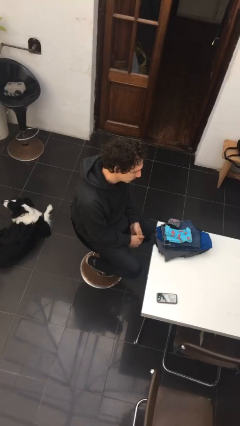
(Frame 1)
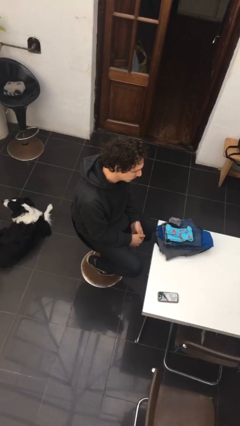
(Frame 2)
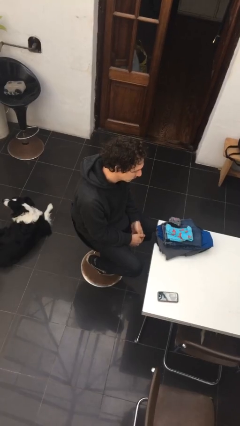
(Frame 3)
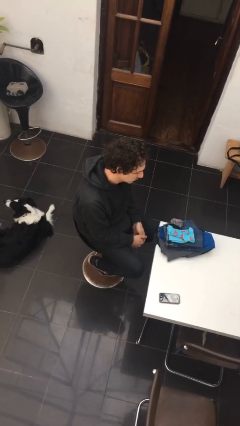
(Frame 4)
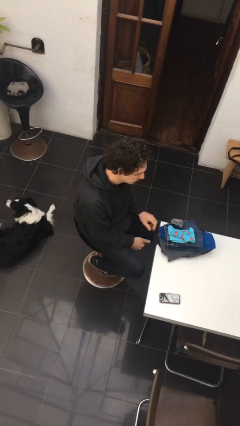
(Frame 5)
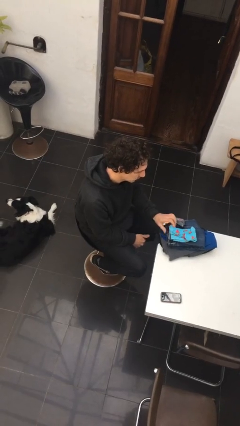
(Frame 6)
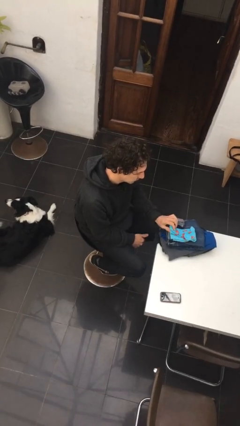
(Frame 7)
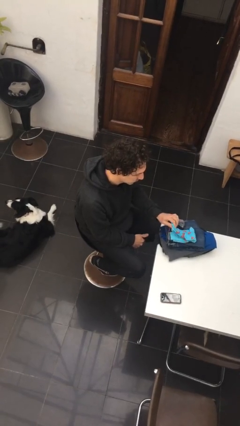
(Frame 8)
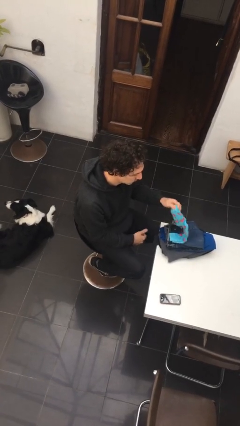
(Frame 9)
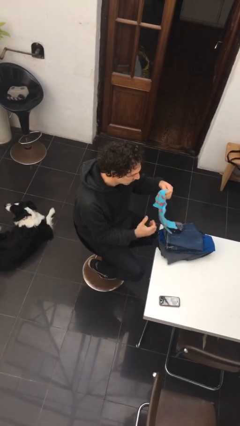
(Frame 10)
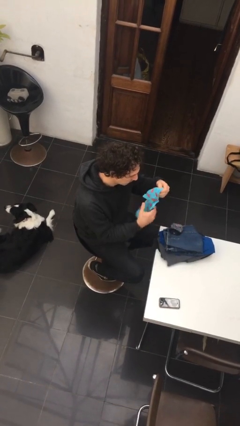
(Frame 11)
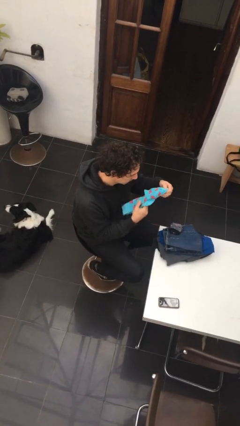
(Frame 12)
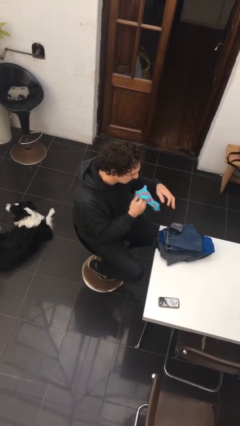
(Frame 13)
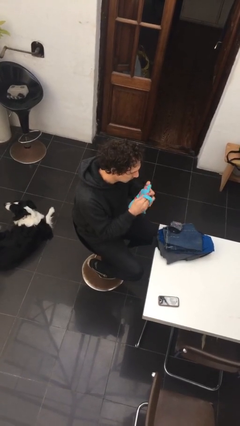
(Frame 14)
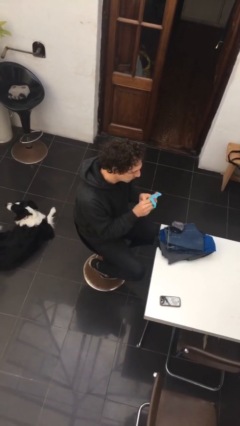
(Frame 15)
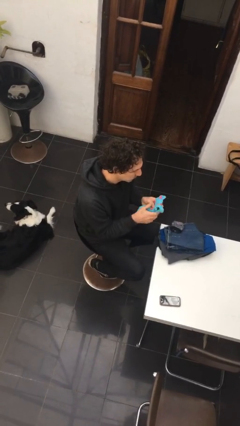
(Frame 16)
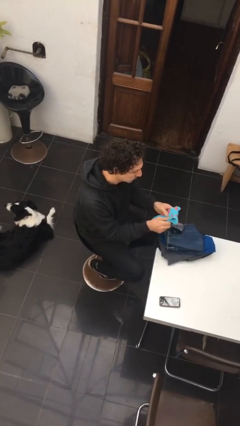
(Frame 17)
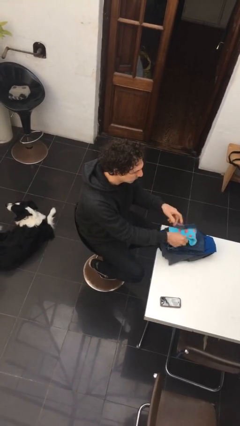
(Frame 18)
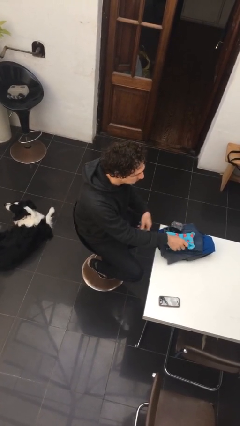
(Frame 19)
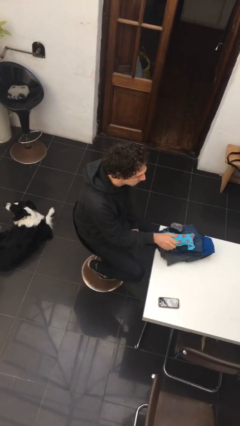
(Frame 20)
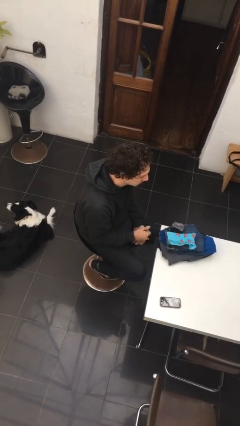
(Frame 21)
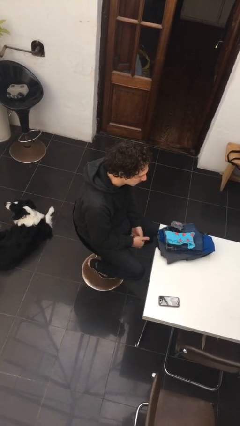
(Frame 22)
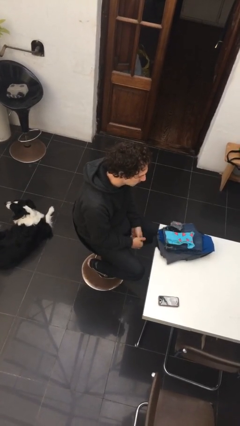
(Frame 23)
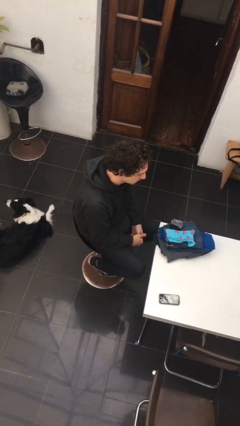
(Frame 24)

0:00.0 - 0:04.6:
person folds socks

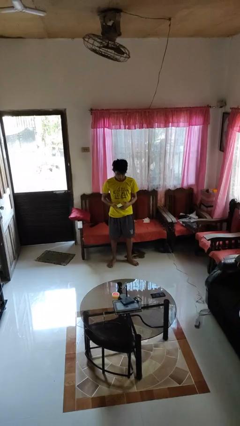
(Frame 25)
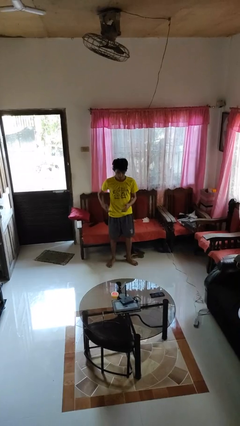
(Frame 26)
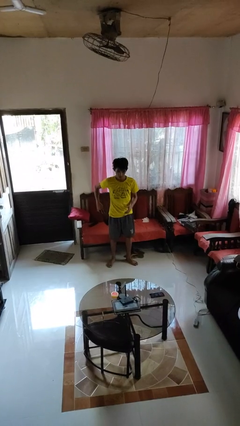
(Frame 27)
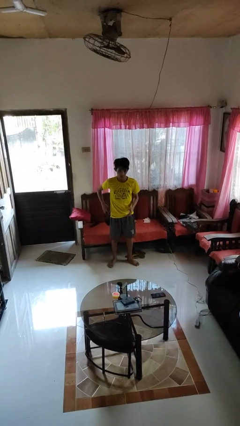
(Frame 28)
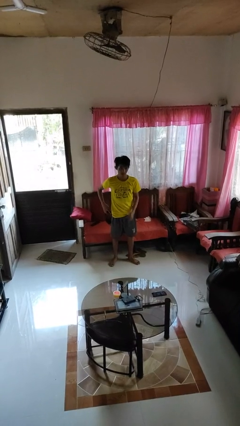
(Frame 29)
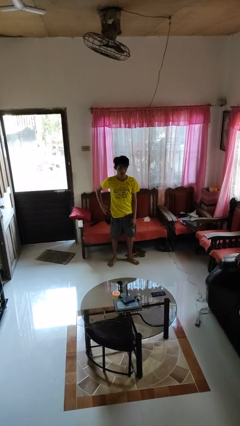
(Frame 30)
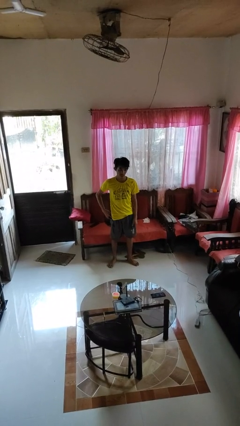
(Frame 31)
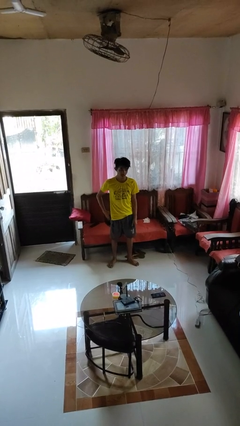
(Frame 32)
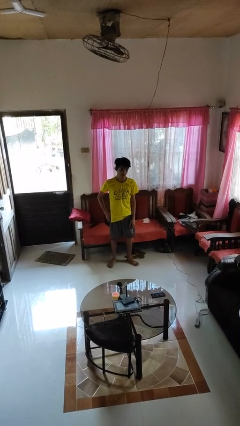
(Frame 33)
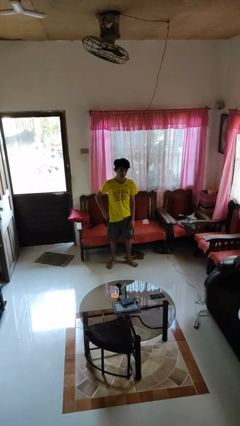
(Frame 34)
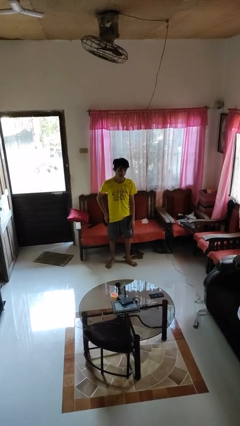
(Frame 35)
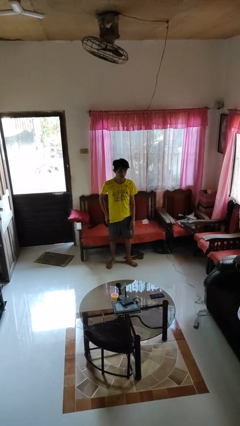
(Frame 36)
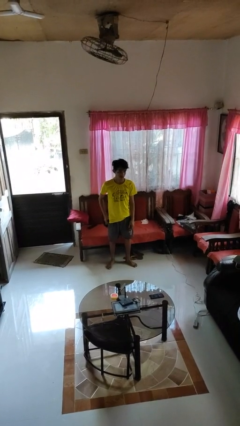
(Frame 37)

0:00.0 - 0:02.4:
person puts phone into pocket

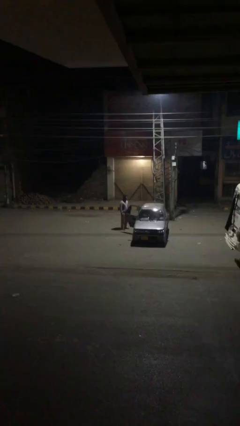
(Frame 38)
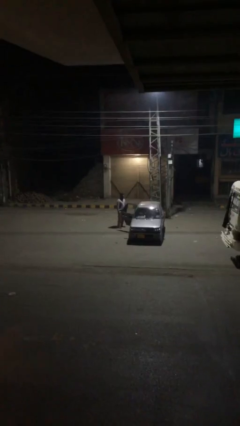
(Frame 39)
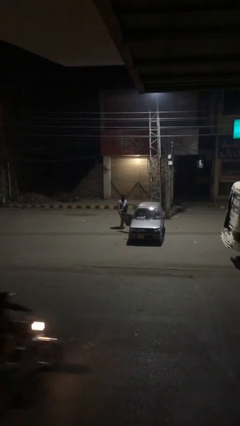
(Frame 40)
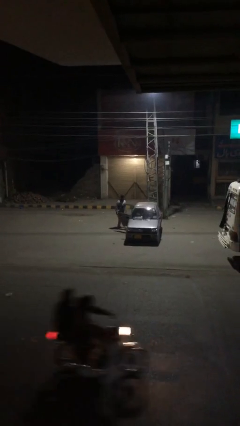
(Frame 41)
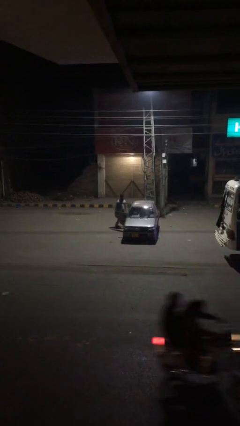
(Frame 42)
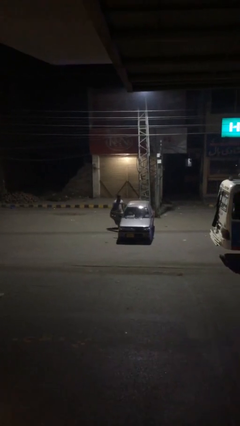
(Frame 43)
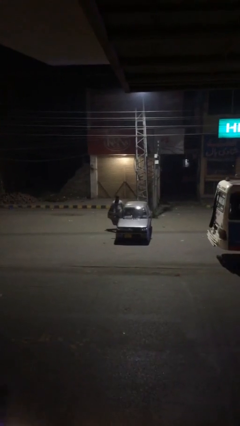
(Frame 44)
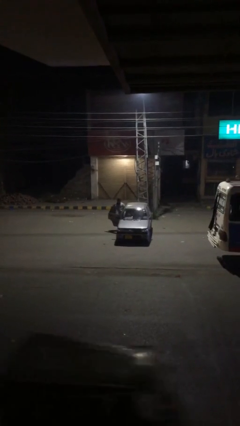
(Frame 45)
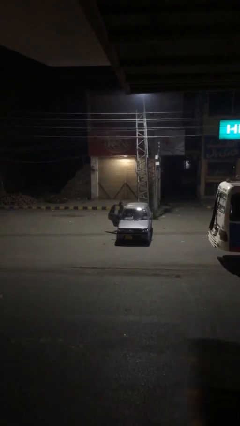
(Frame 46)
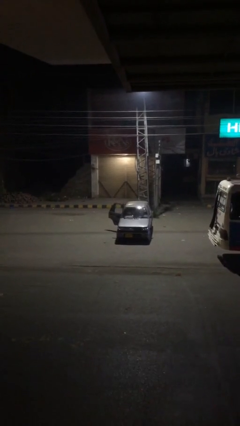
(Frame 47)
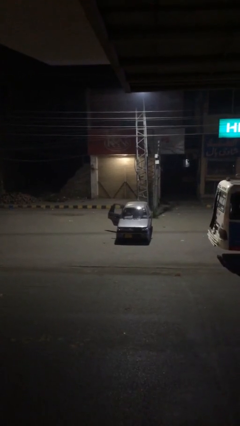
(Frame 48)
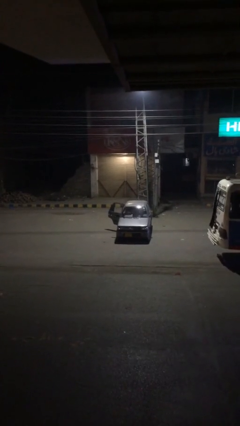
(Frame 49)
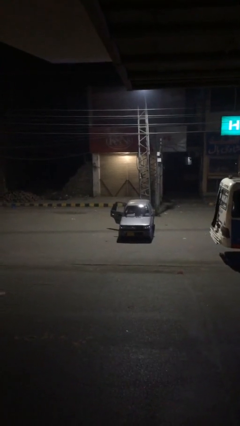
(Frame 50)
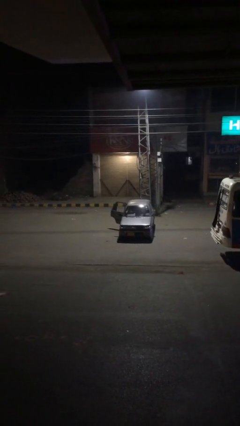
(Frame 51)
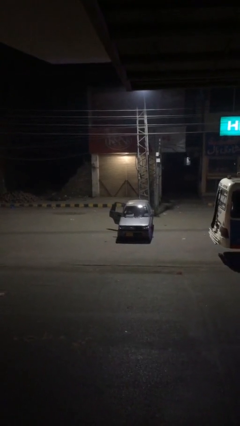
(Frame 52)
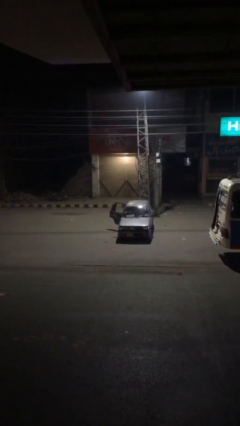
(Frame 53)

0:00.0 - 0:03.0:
person enters car

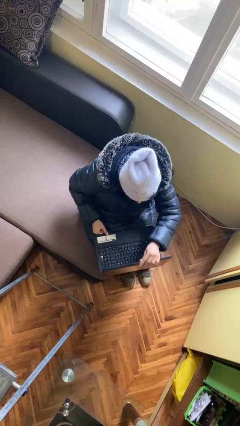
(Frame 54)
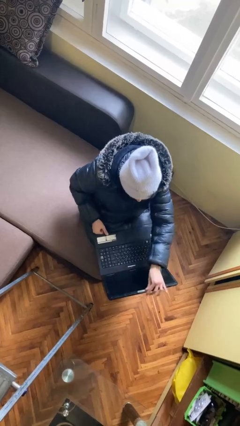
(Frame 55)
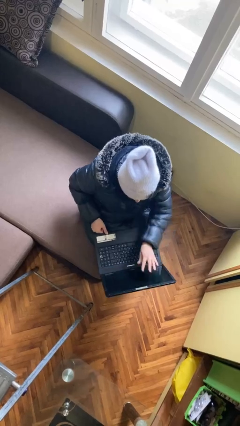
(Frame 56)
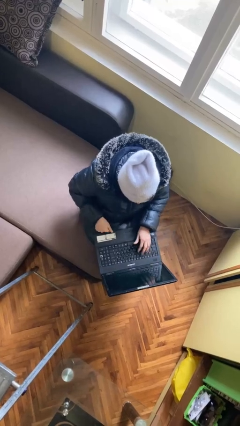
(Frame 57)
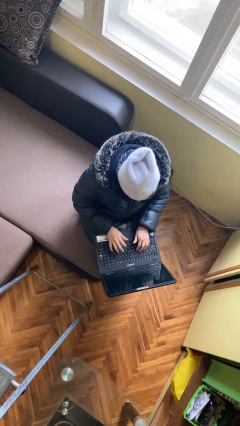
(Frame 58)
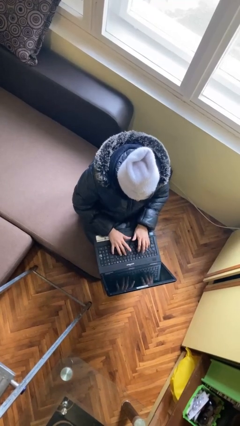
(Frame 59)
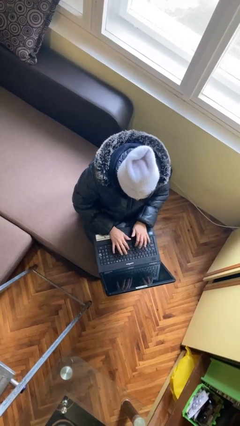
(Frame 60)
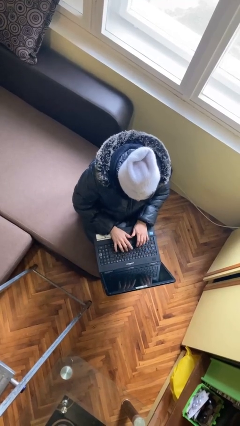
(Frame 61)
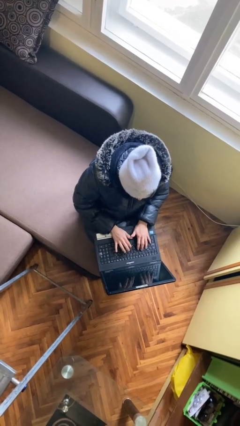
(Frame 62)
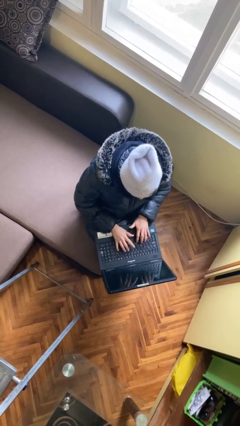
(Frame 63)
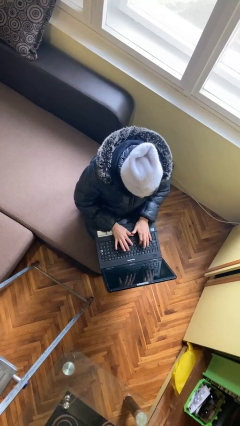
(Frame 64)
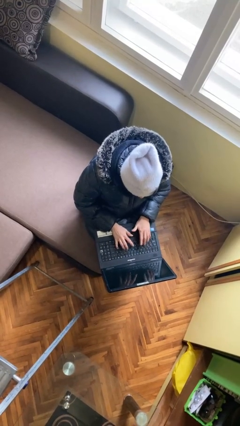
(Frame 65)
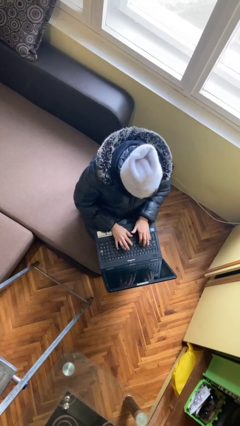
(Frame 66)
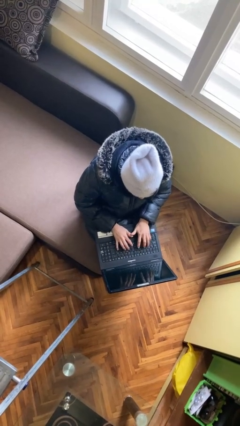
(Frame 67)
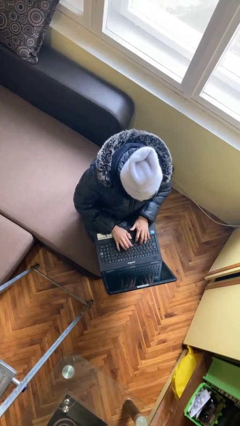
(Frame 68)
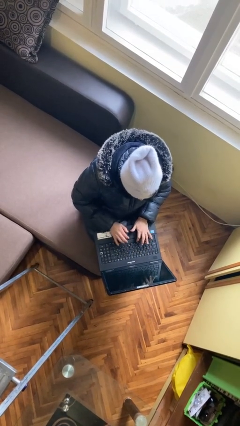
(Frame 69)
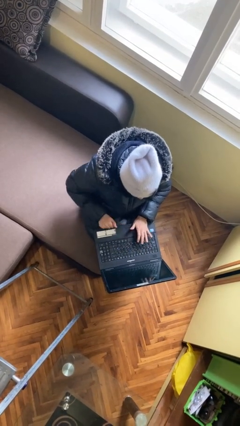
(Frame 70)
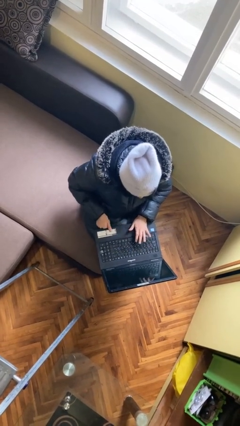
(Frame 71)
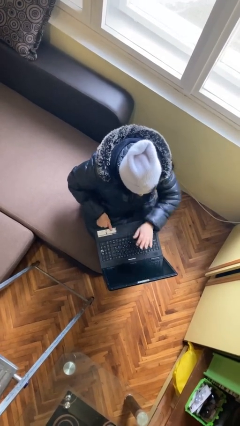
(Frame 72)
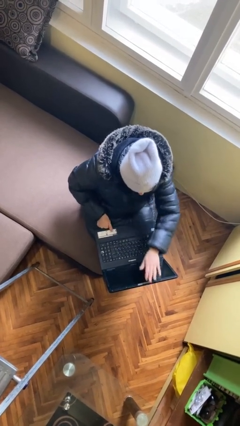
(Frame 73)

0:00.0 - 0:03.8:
person interacts with laptop

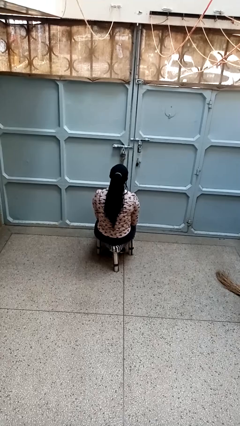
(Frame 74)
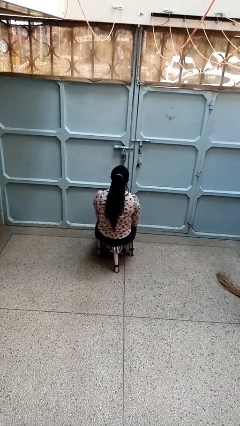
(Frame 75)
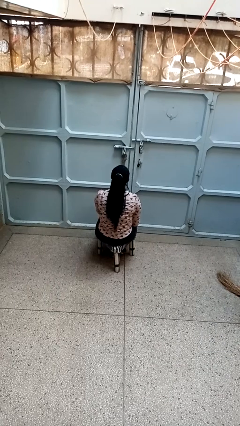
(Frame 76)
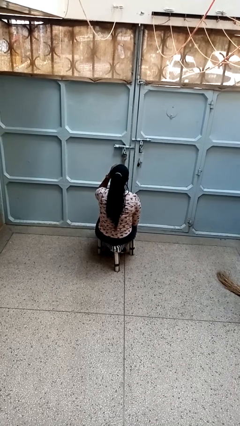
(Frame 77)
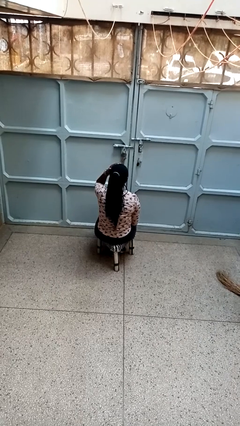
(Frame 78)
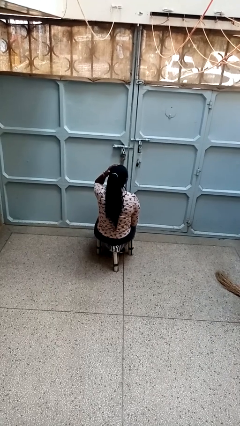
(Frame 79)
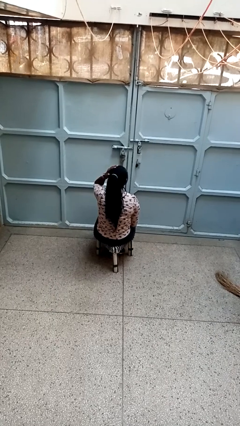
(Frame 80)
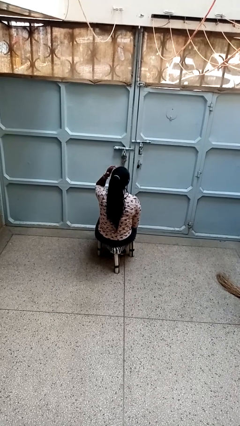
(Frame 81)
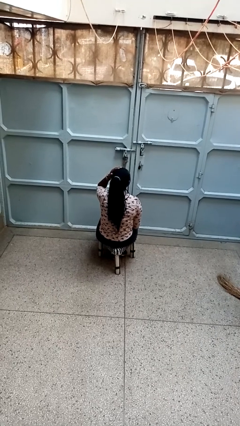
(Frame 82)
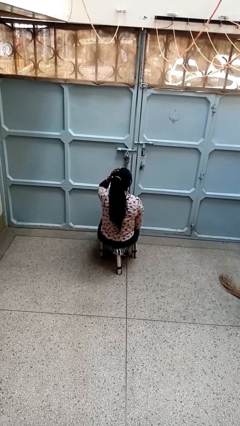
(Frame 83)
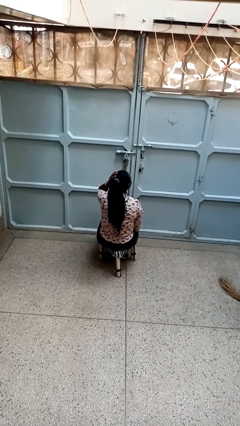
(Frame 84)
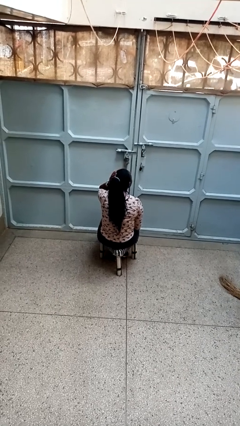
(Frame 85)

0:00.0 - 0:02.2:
person strokes hair

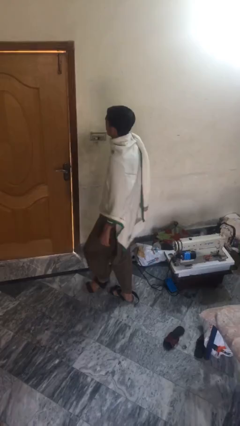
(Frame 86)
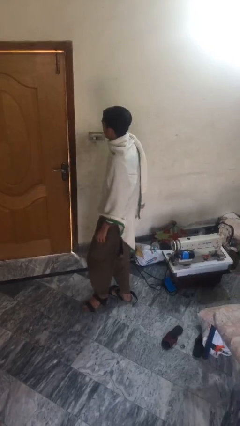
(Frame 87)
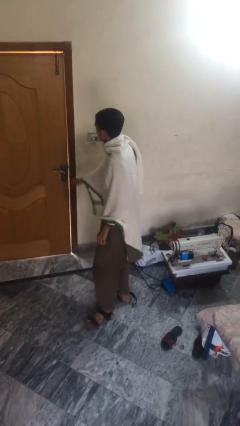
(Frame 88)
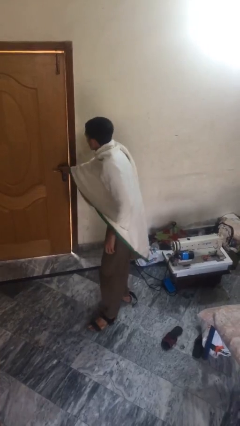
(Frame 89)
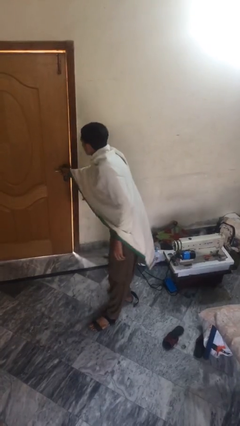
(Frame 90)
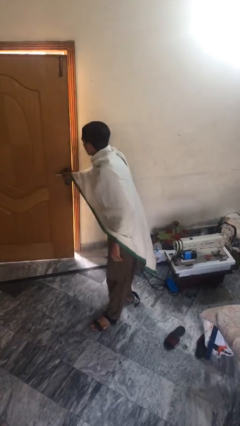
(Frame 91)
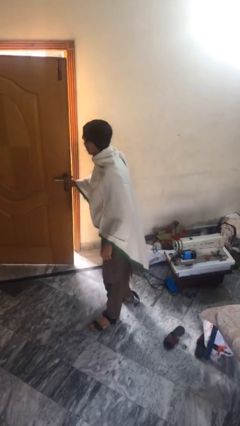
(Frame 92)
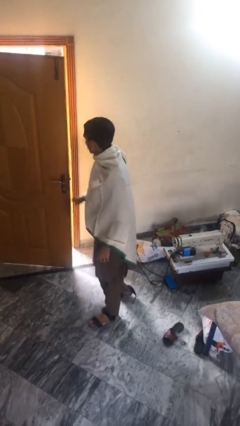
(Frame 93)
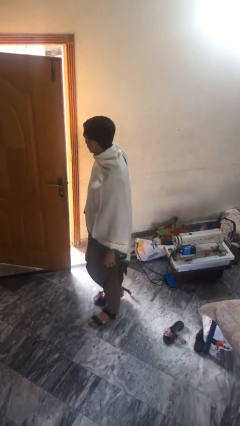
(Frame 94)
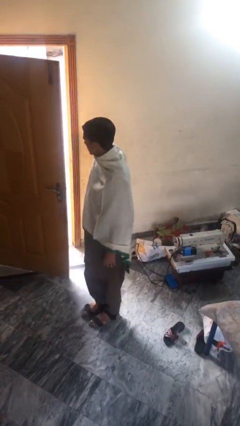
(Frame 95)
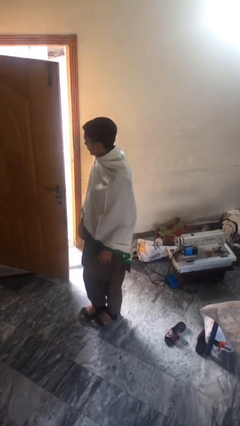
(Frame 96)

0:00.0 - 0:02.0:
person opens facility door
